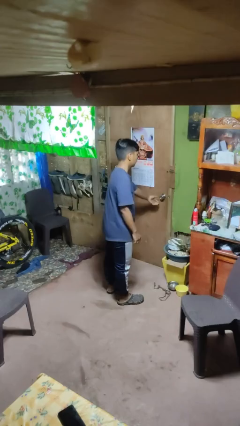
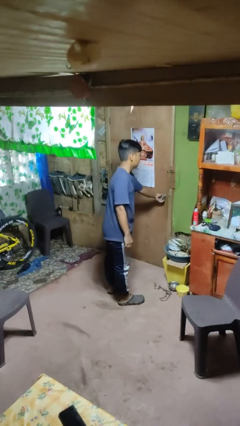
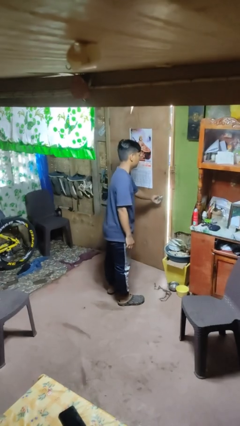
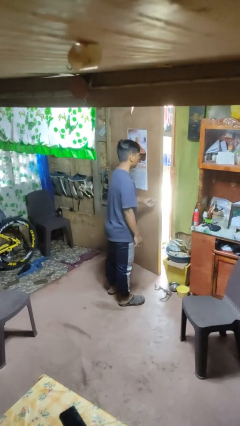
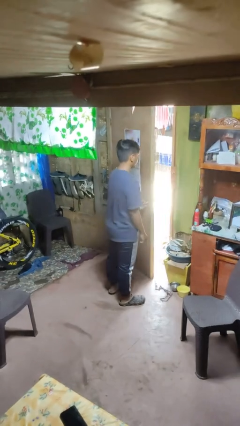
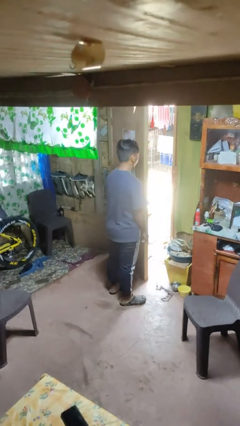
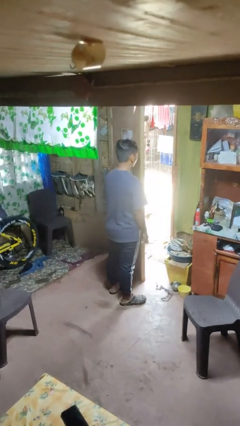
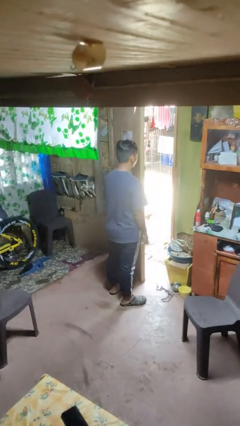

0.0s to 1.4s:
person opens facility door

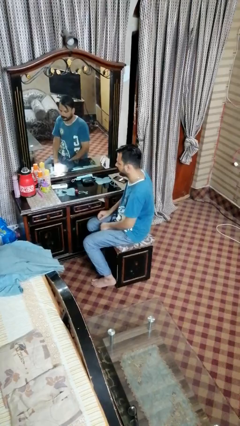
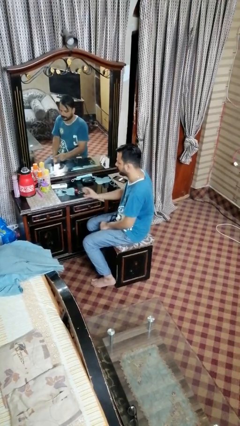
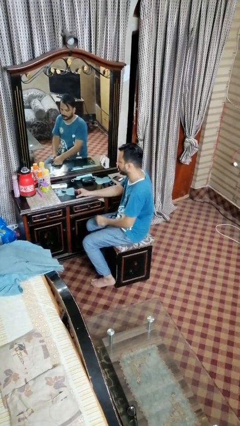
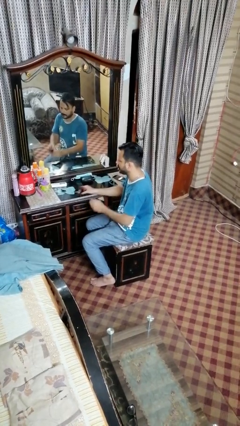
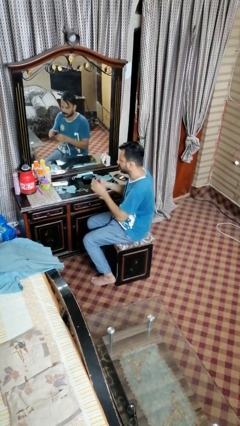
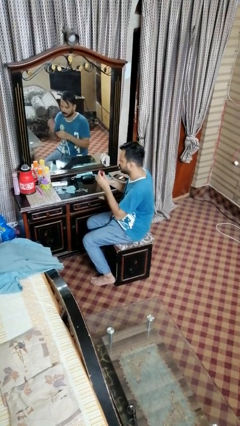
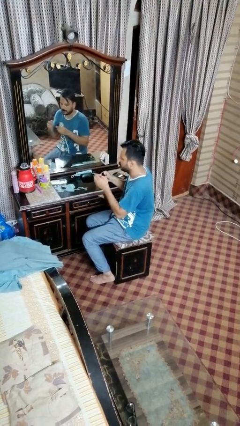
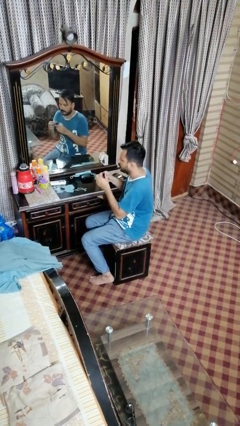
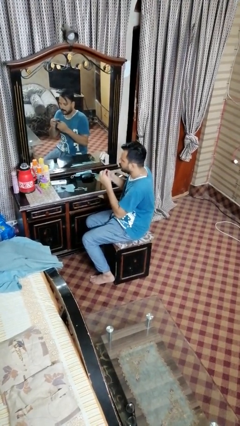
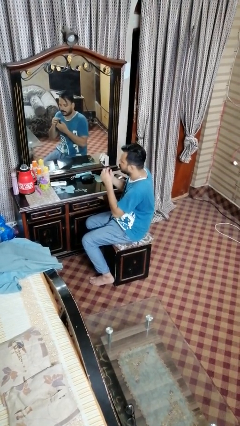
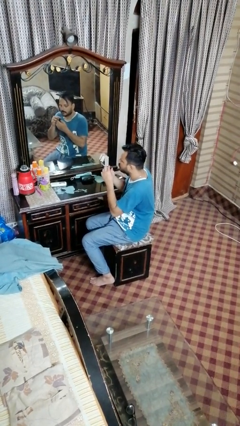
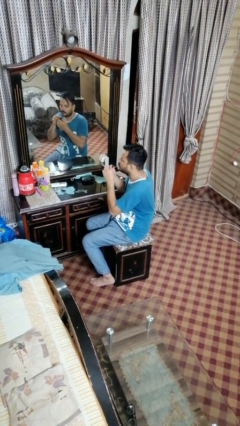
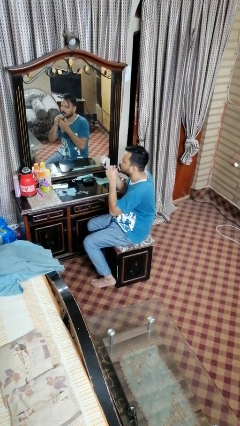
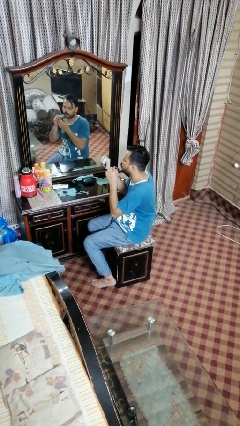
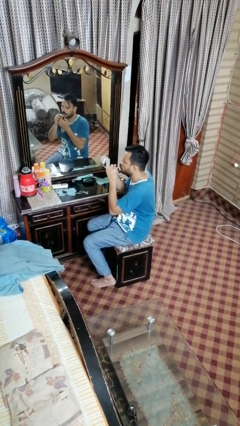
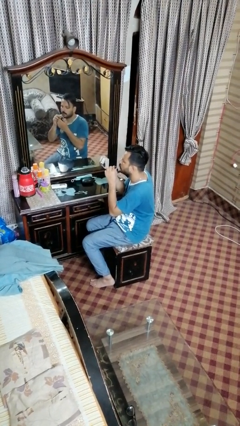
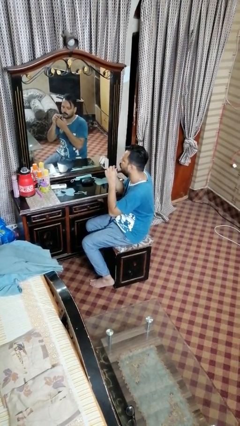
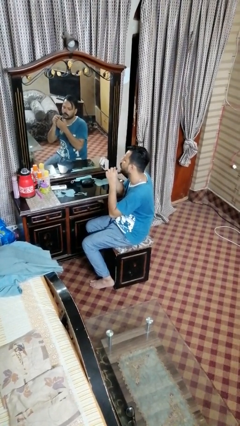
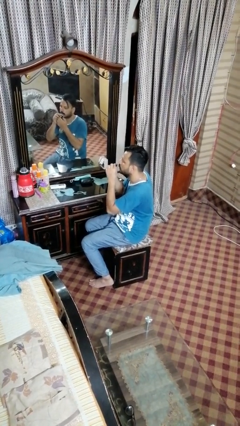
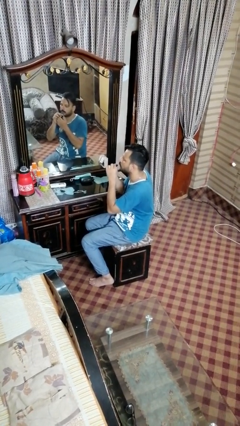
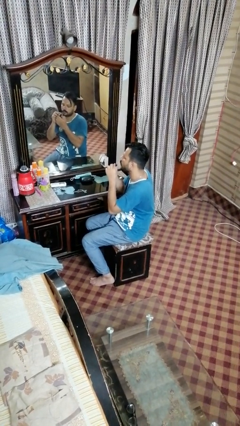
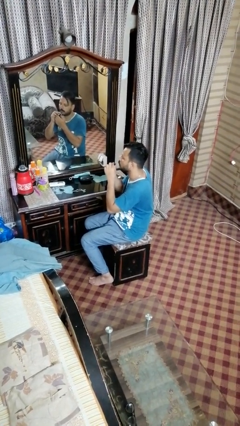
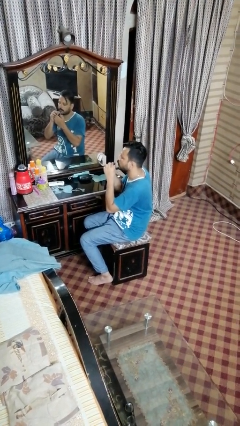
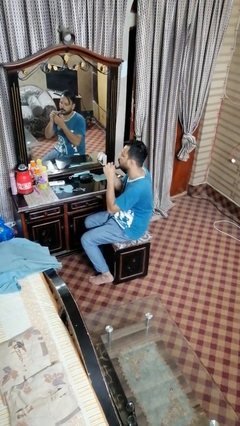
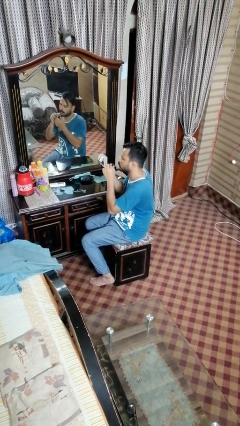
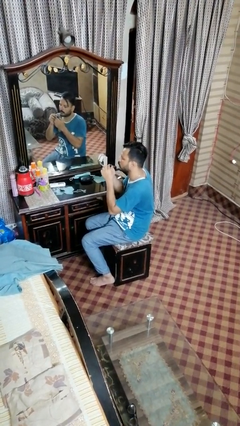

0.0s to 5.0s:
person applies lip makeup

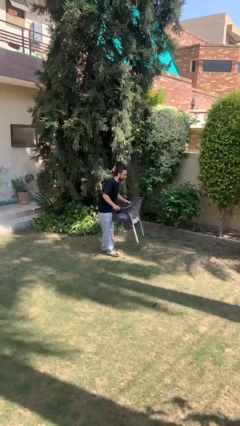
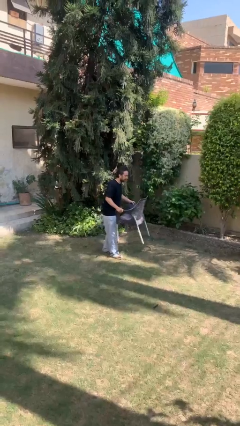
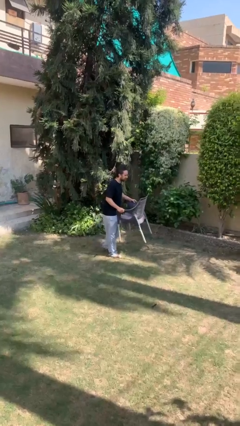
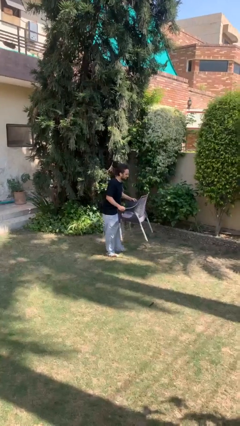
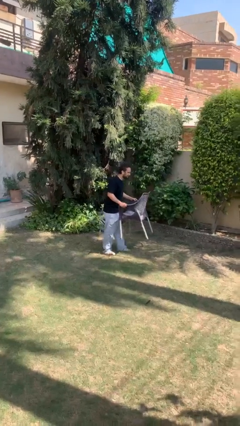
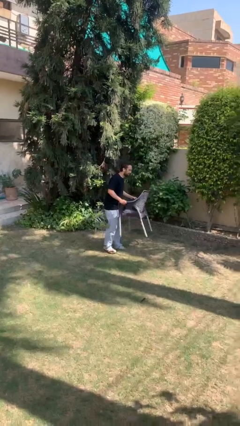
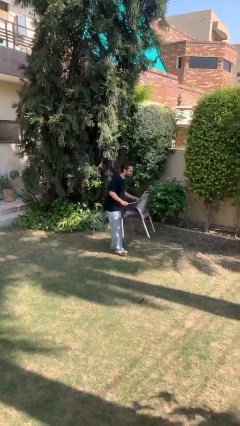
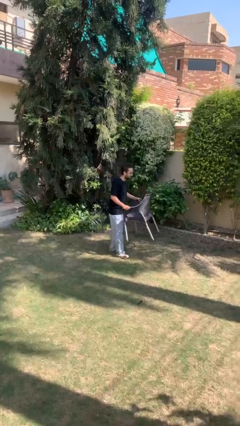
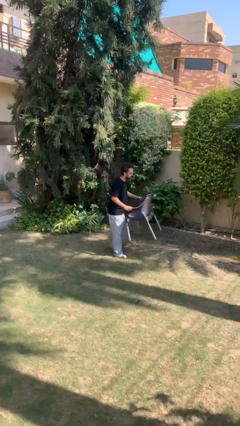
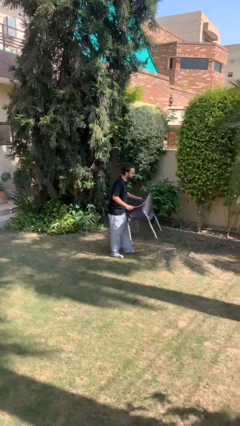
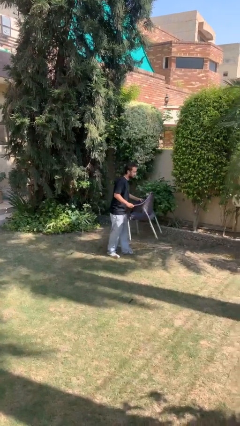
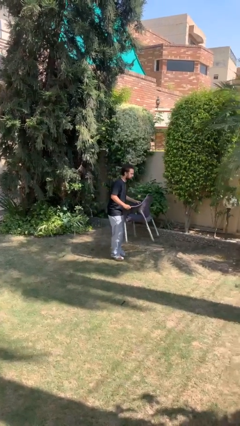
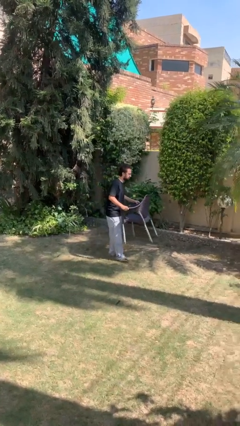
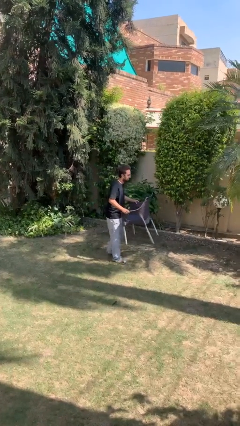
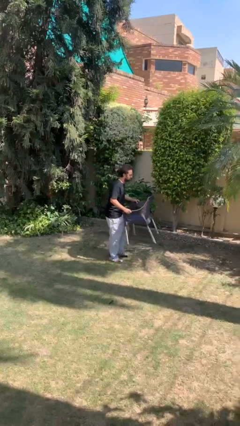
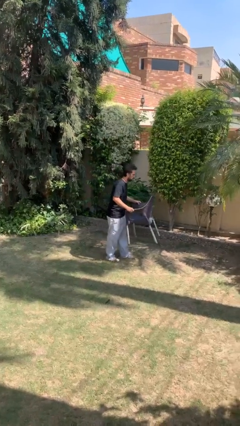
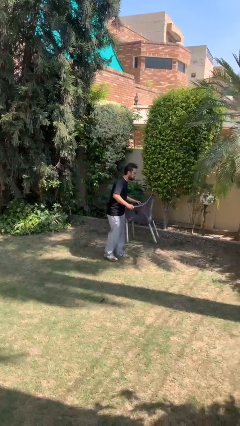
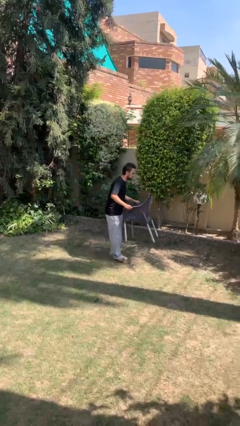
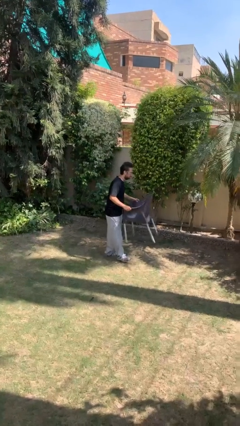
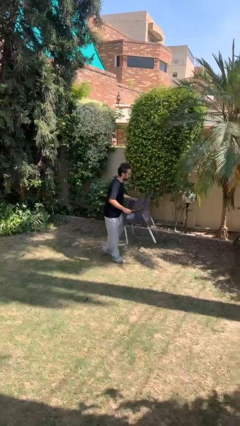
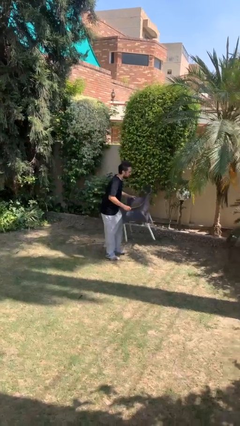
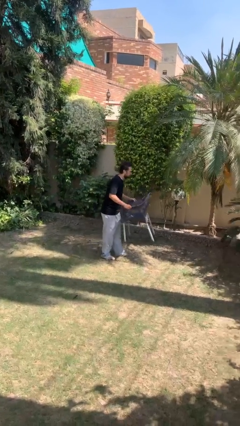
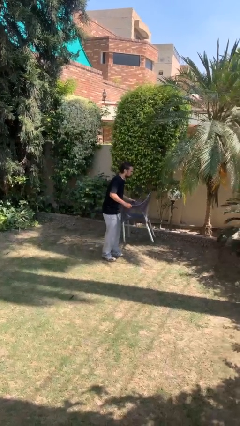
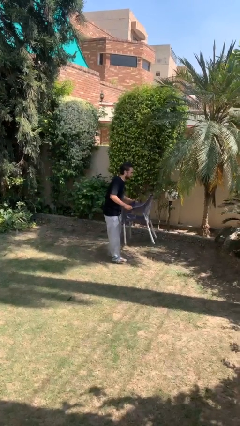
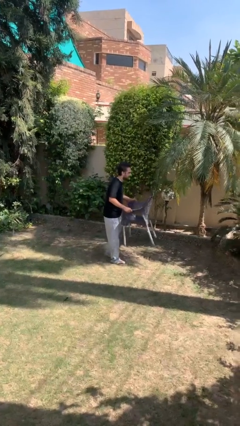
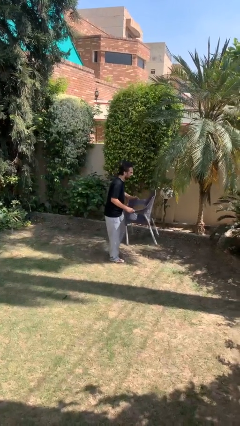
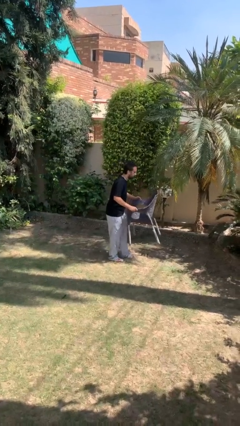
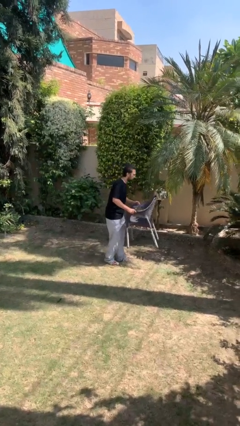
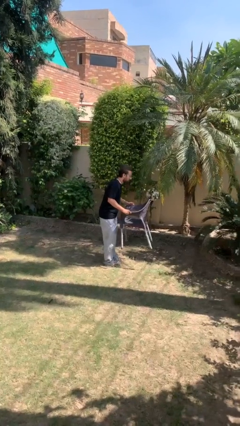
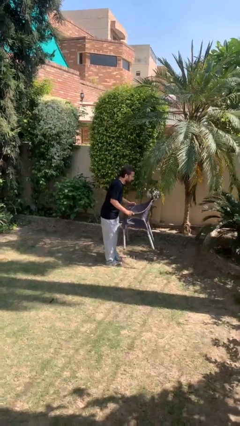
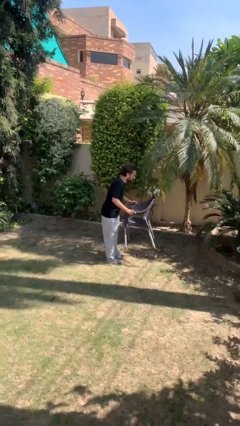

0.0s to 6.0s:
person carries heavy object

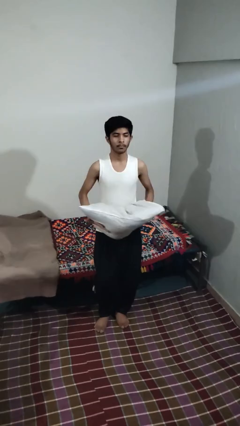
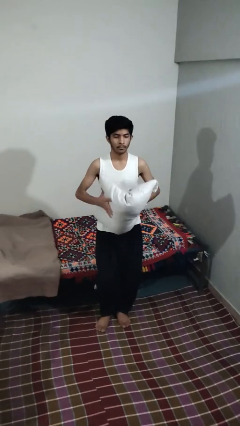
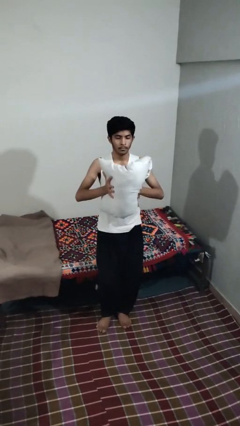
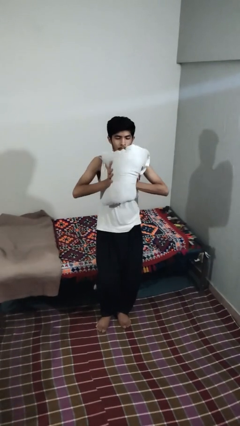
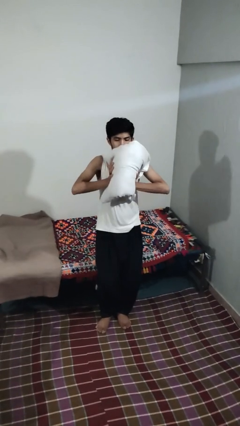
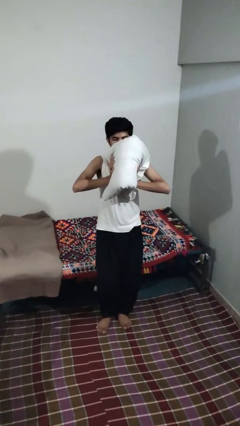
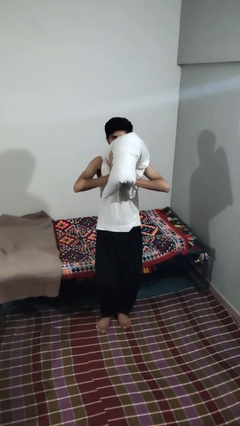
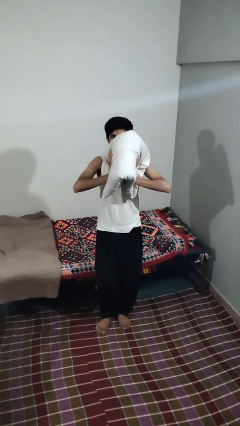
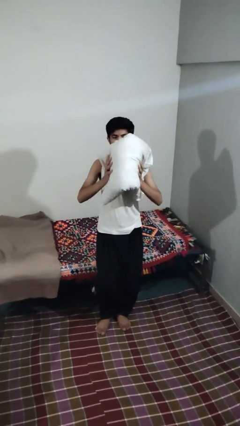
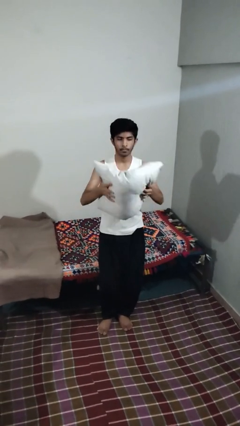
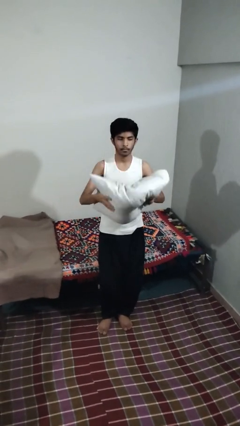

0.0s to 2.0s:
person squeezes object

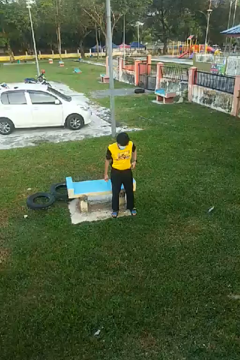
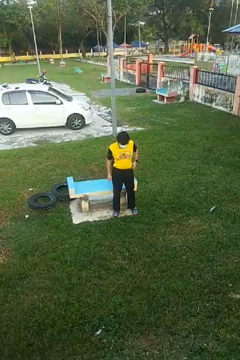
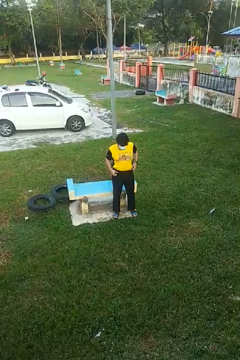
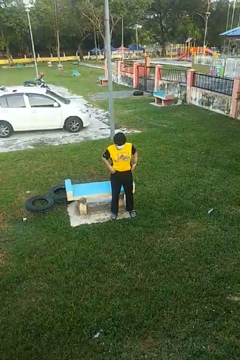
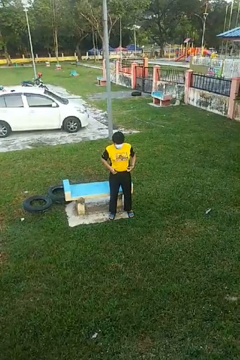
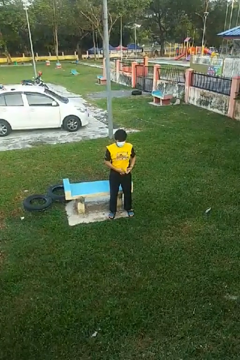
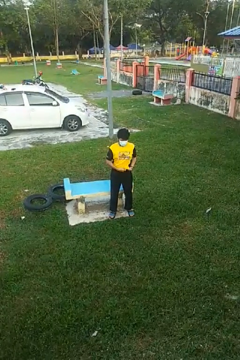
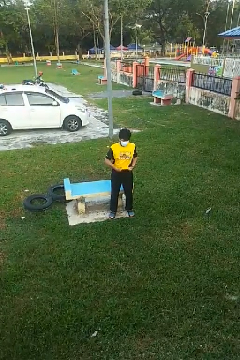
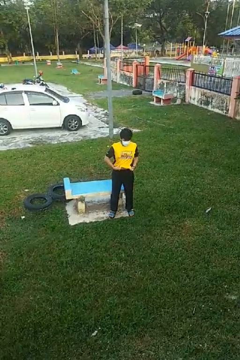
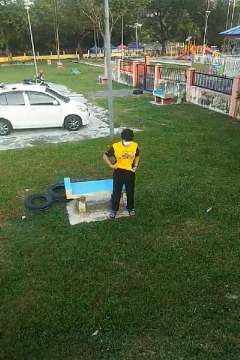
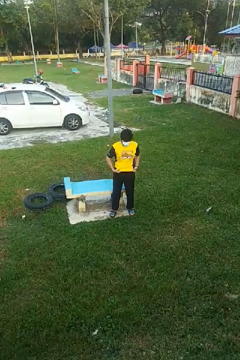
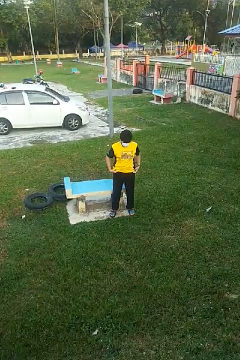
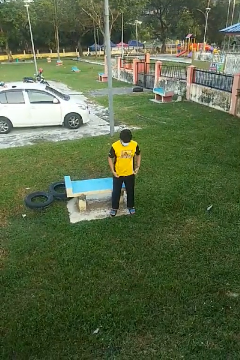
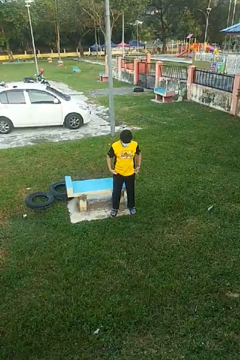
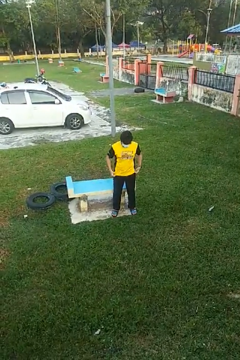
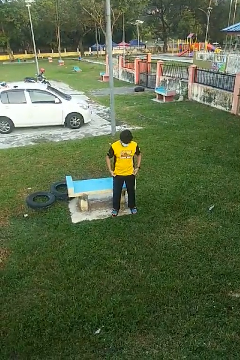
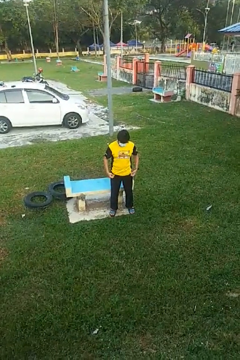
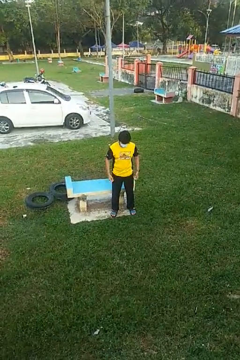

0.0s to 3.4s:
person untucks shirt

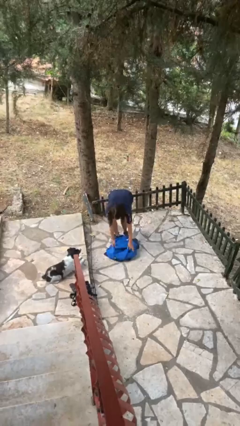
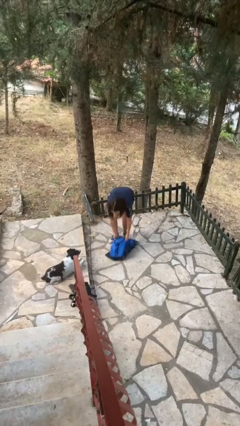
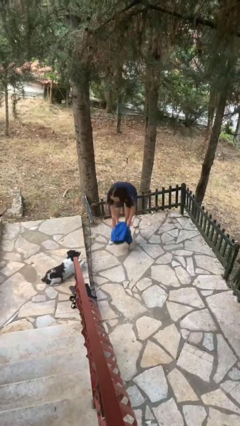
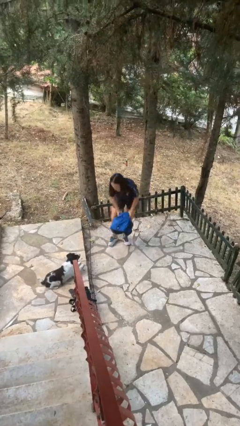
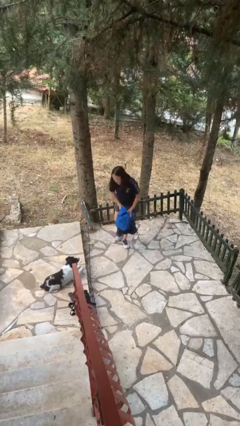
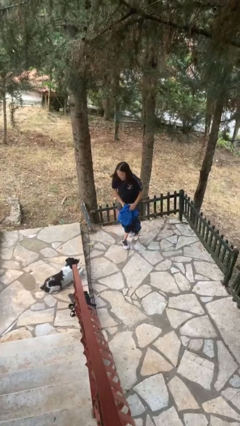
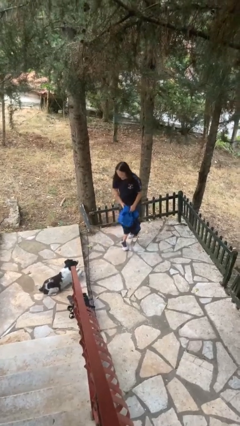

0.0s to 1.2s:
person picks up object from floor
